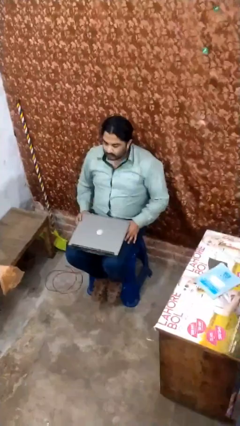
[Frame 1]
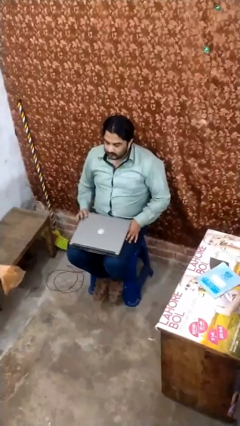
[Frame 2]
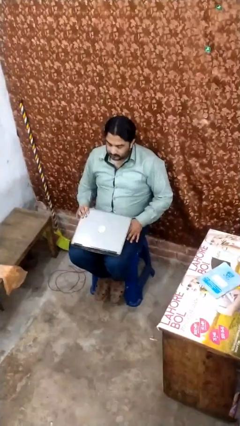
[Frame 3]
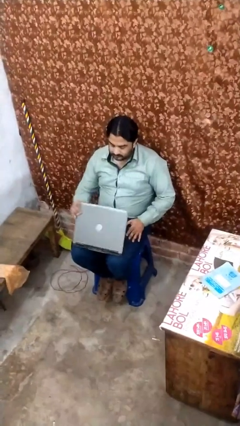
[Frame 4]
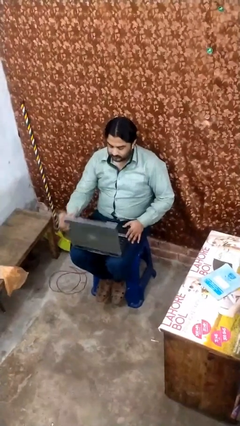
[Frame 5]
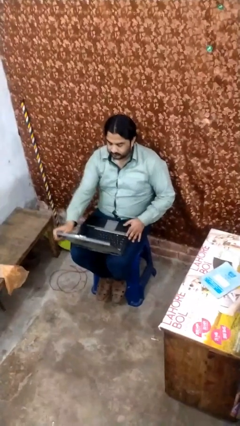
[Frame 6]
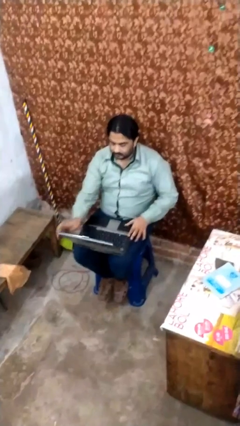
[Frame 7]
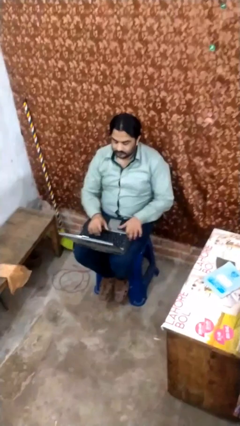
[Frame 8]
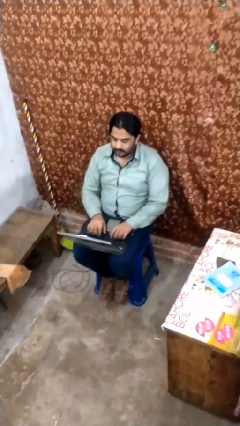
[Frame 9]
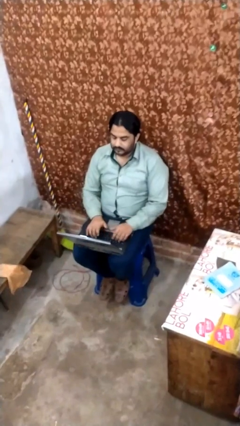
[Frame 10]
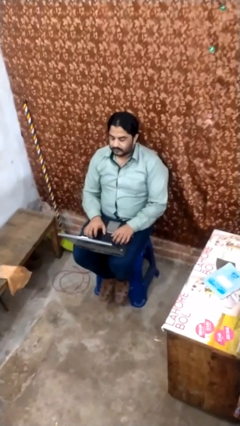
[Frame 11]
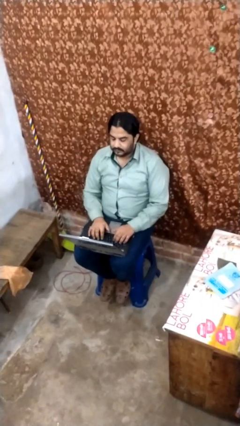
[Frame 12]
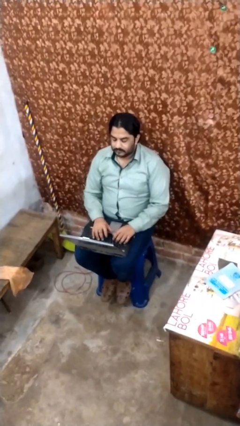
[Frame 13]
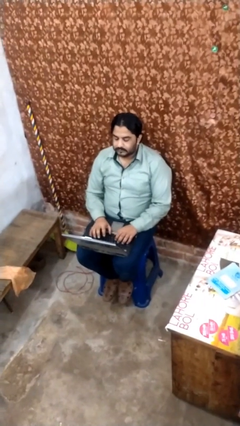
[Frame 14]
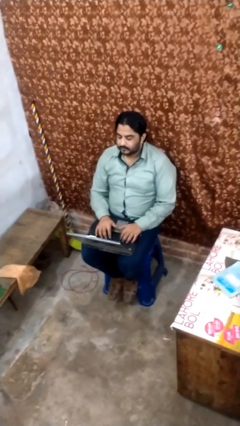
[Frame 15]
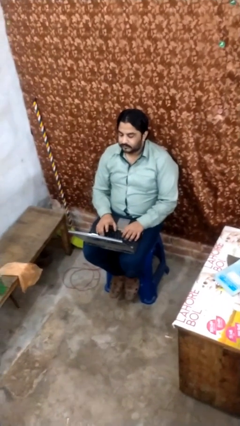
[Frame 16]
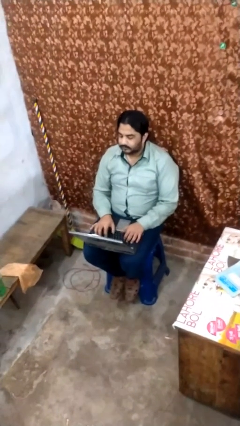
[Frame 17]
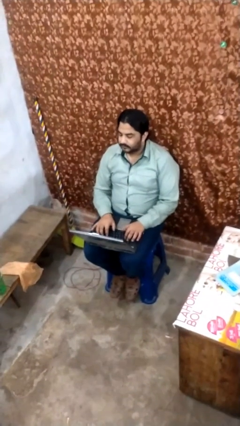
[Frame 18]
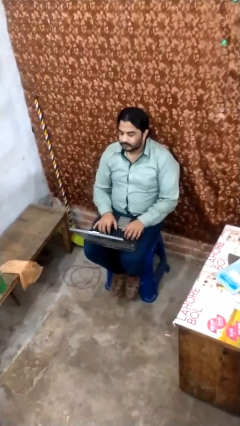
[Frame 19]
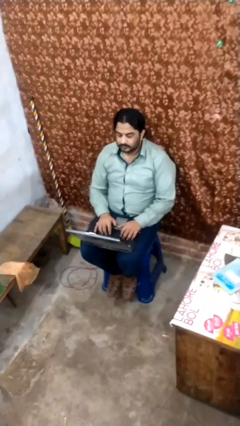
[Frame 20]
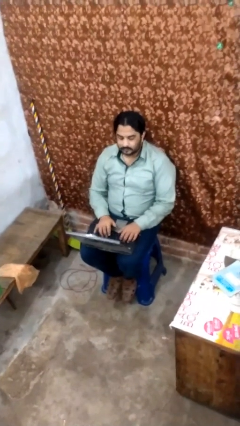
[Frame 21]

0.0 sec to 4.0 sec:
person interacts with laptop

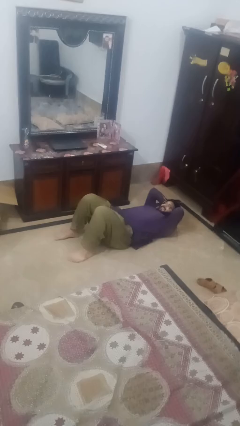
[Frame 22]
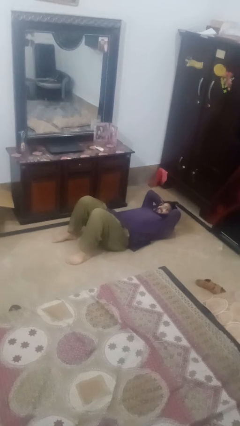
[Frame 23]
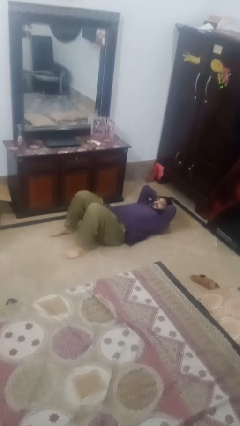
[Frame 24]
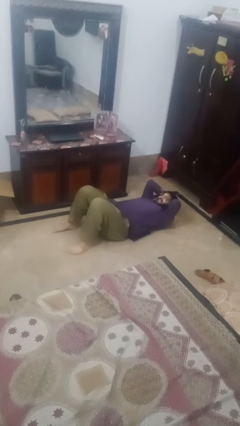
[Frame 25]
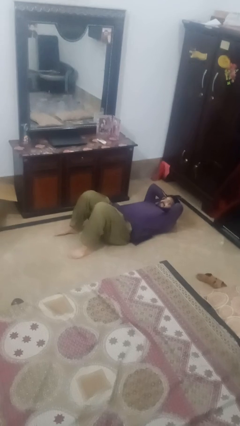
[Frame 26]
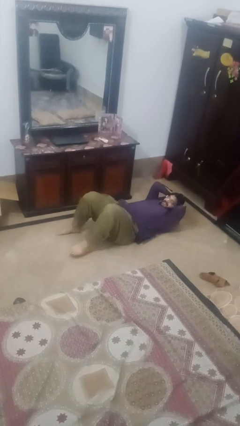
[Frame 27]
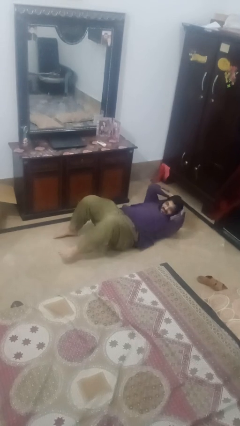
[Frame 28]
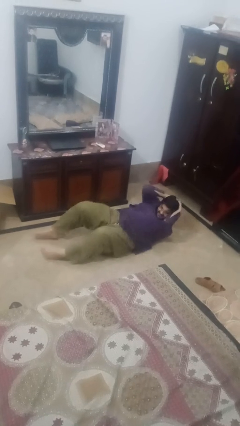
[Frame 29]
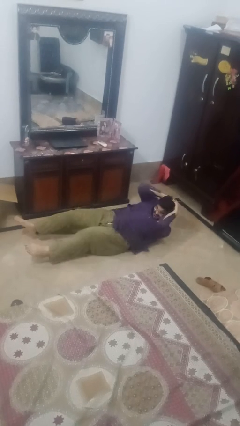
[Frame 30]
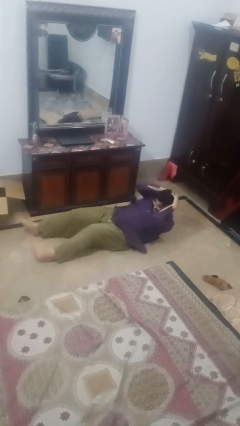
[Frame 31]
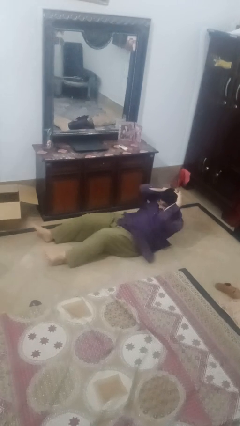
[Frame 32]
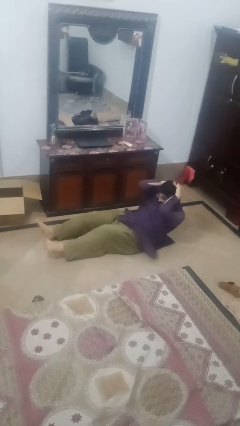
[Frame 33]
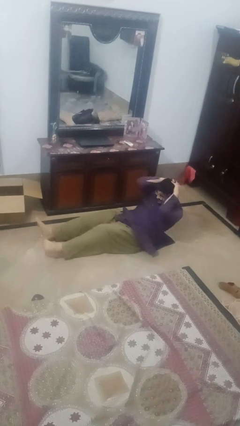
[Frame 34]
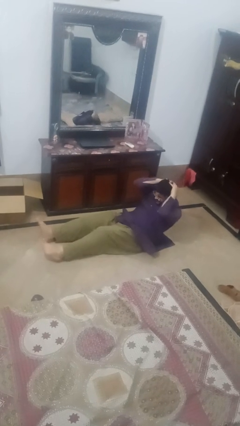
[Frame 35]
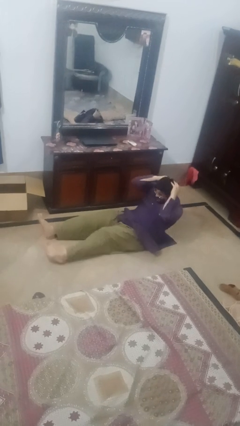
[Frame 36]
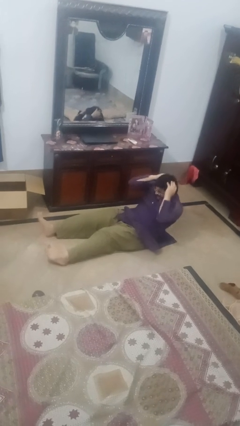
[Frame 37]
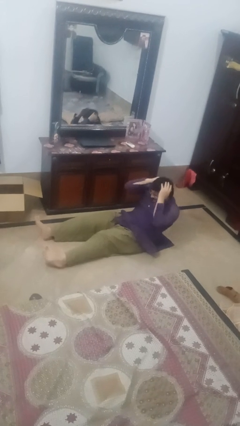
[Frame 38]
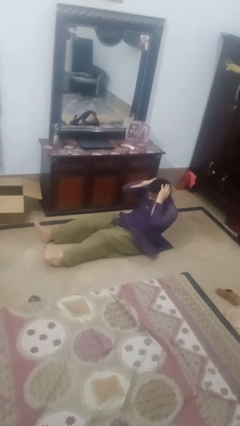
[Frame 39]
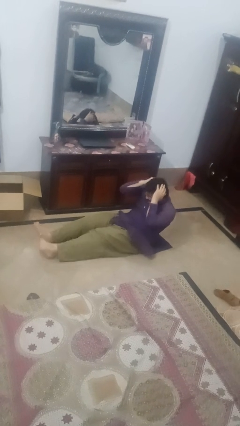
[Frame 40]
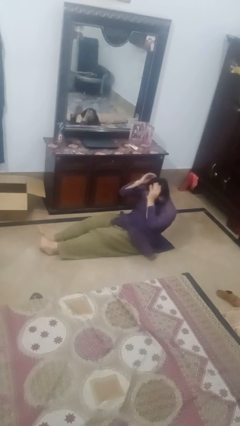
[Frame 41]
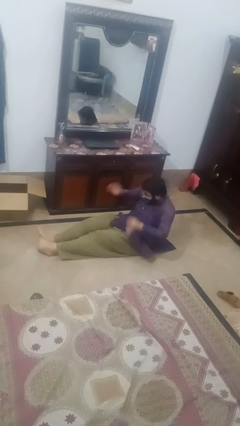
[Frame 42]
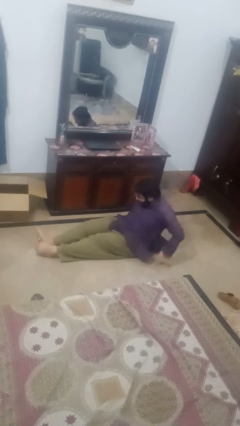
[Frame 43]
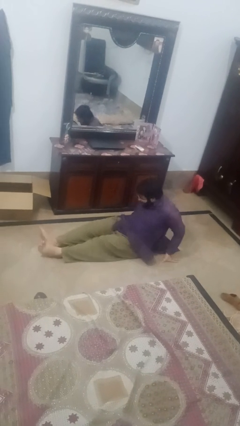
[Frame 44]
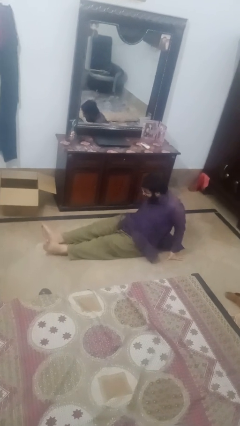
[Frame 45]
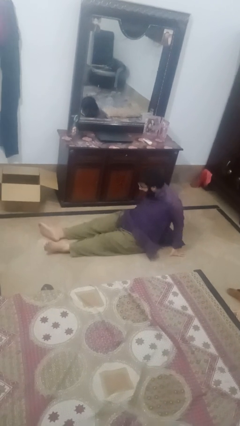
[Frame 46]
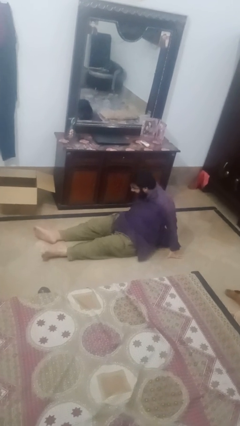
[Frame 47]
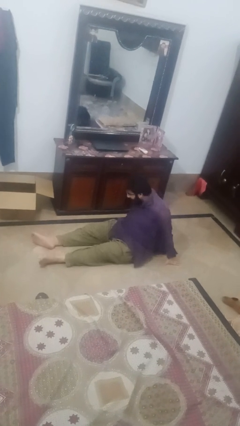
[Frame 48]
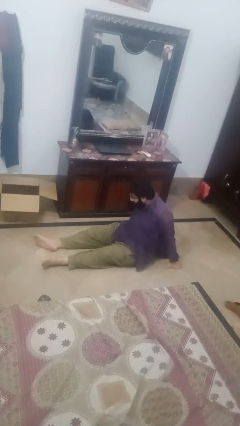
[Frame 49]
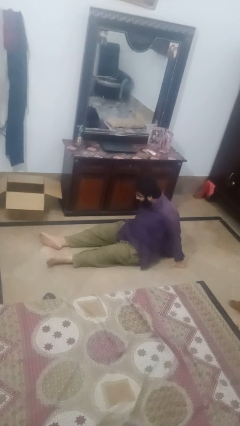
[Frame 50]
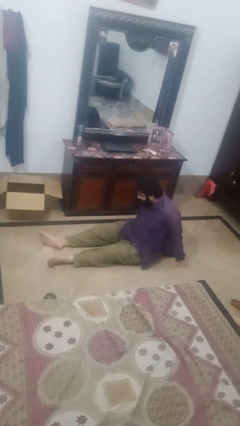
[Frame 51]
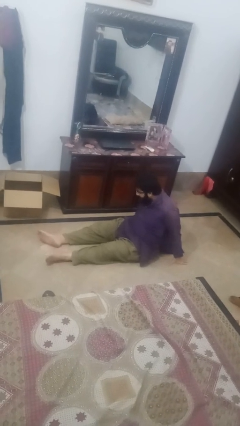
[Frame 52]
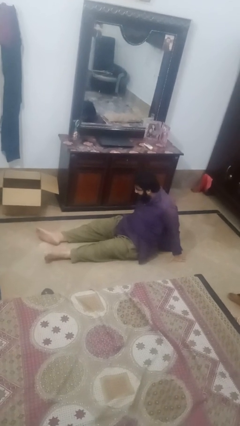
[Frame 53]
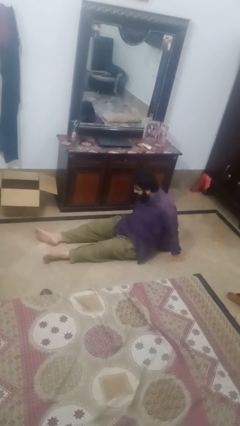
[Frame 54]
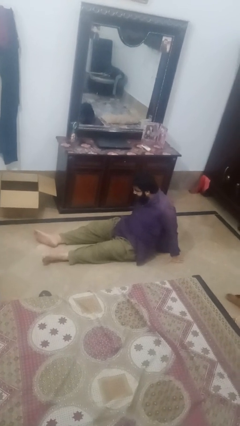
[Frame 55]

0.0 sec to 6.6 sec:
person exercises with situp

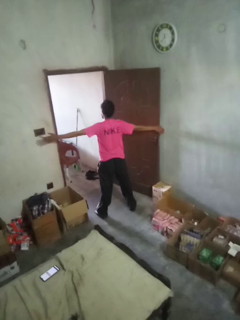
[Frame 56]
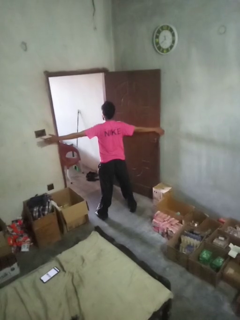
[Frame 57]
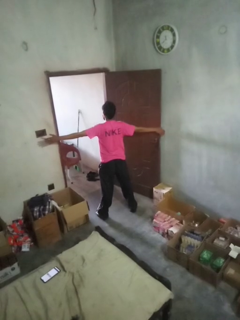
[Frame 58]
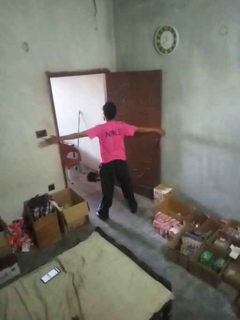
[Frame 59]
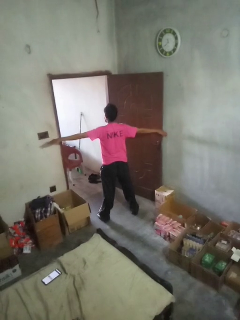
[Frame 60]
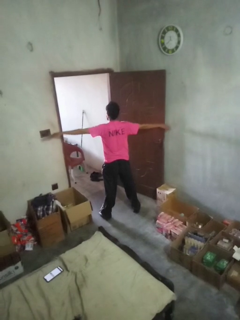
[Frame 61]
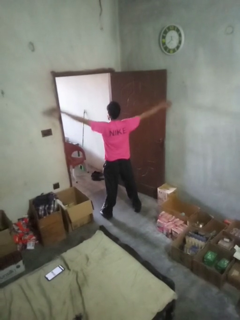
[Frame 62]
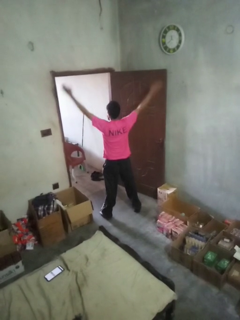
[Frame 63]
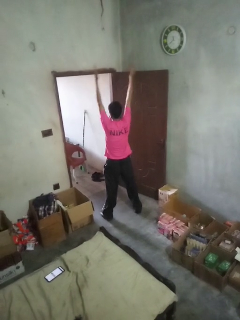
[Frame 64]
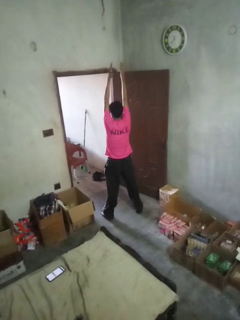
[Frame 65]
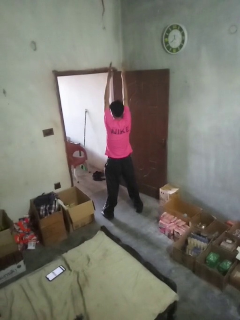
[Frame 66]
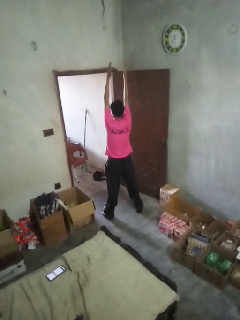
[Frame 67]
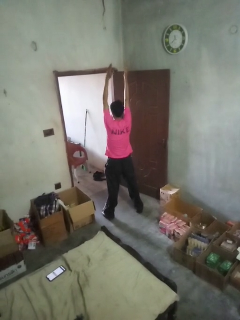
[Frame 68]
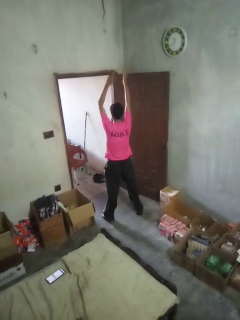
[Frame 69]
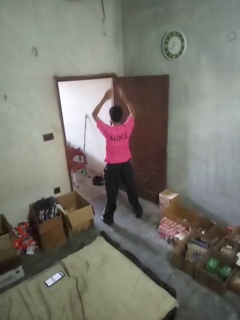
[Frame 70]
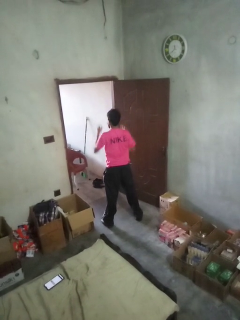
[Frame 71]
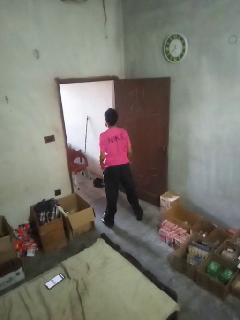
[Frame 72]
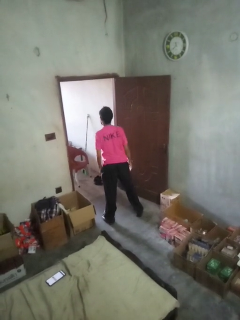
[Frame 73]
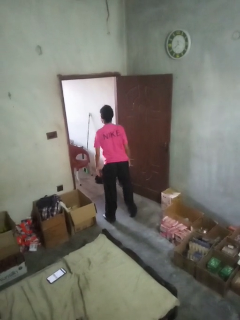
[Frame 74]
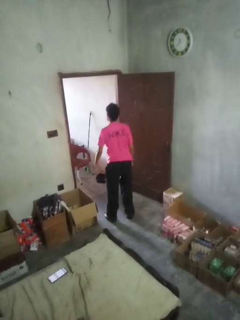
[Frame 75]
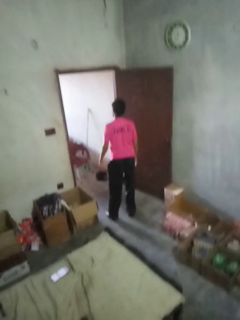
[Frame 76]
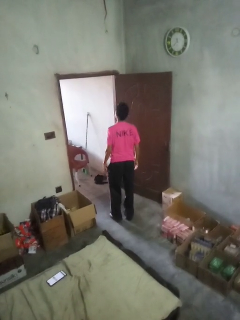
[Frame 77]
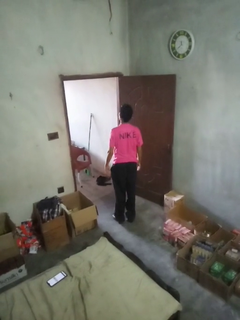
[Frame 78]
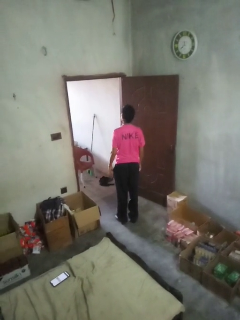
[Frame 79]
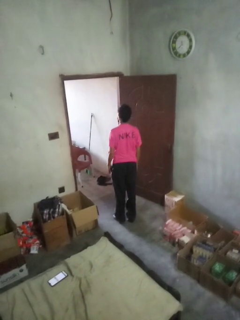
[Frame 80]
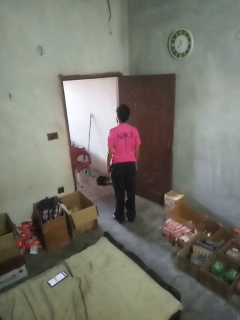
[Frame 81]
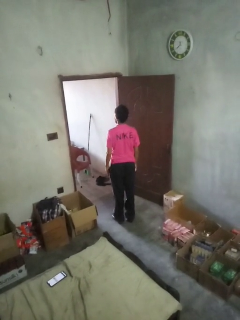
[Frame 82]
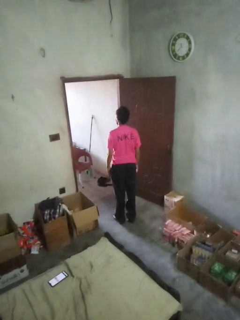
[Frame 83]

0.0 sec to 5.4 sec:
person stretches arms over head

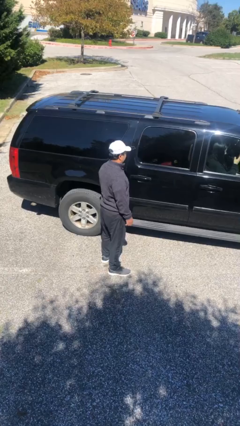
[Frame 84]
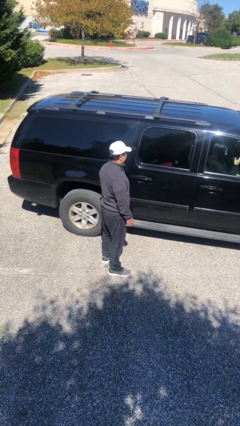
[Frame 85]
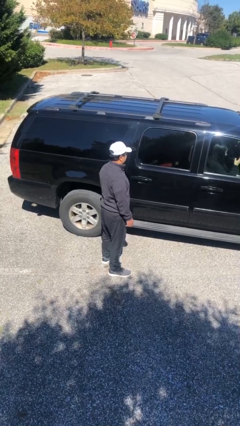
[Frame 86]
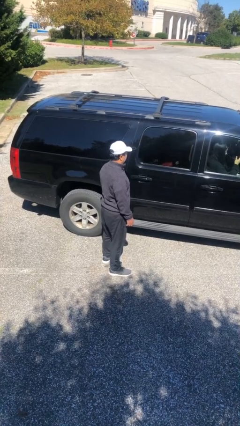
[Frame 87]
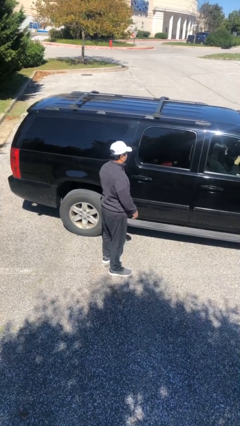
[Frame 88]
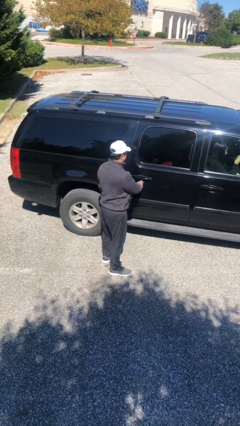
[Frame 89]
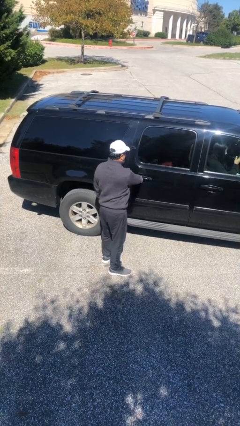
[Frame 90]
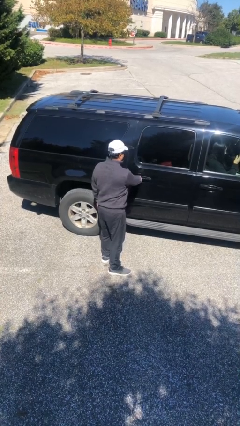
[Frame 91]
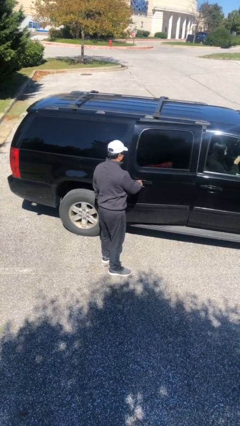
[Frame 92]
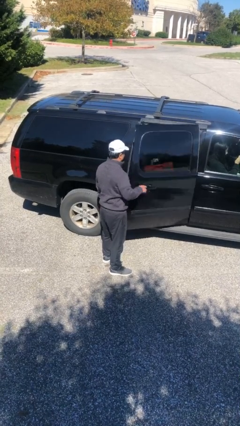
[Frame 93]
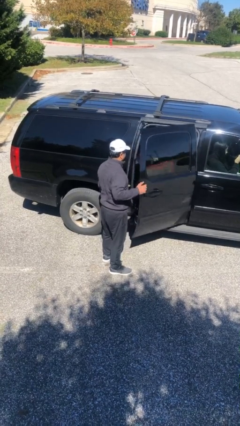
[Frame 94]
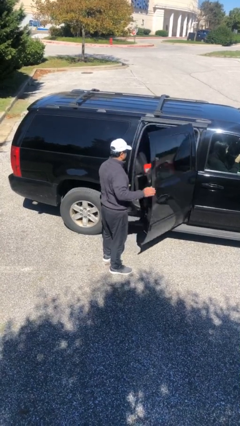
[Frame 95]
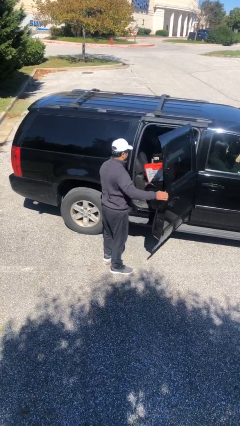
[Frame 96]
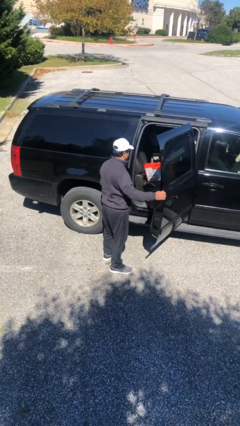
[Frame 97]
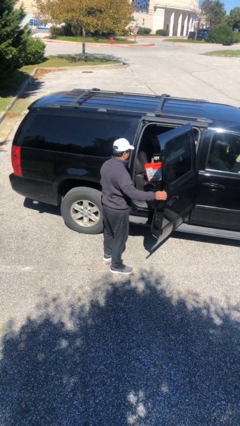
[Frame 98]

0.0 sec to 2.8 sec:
person opens car door

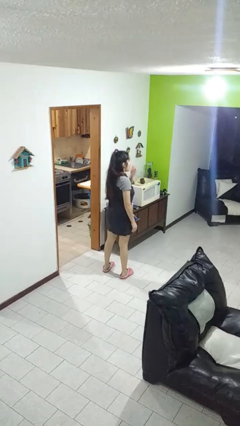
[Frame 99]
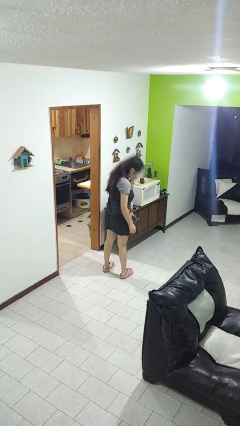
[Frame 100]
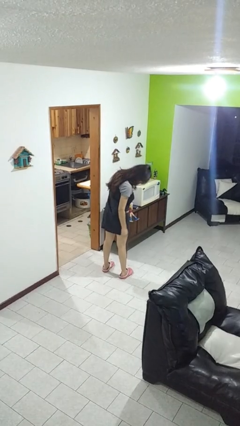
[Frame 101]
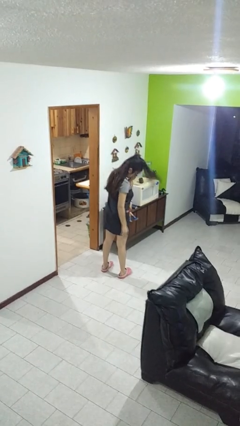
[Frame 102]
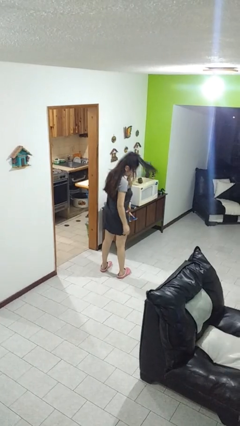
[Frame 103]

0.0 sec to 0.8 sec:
person sneezes into hand
